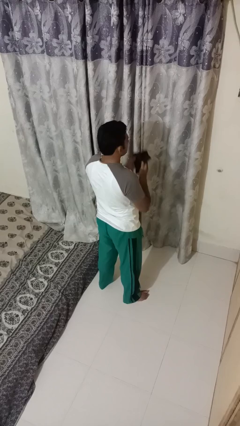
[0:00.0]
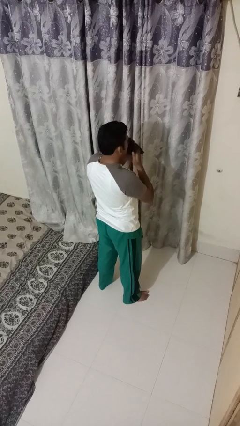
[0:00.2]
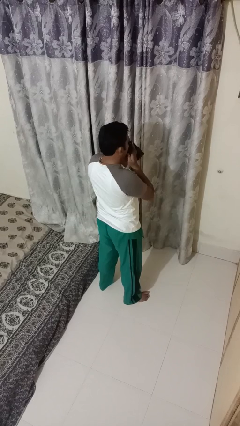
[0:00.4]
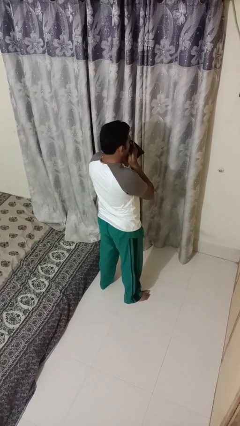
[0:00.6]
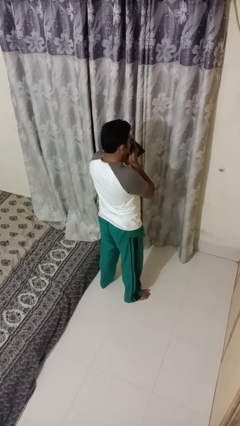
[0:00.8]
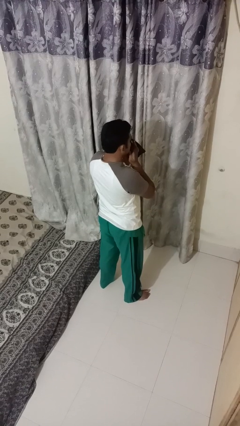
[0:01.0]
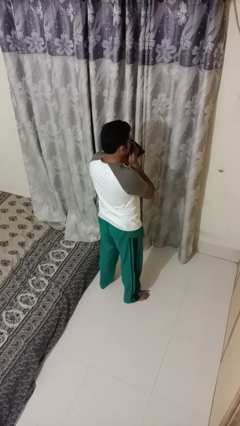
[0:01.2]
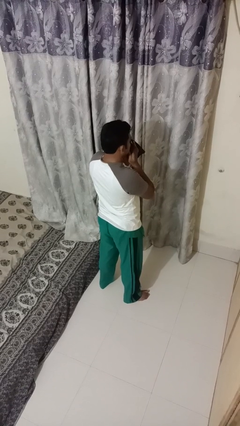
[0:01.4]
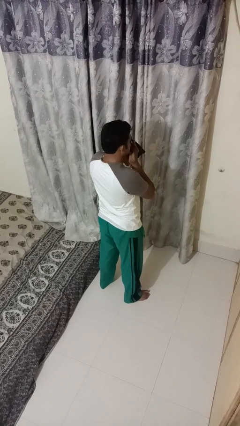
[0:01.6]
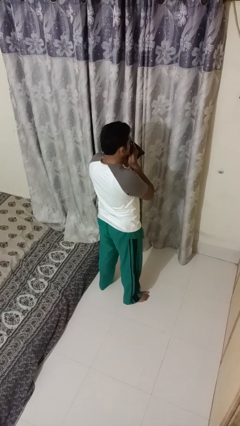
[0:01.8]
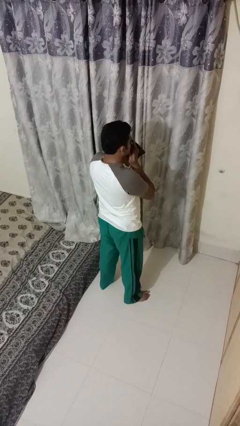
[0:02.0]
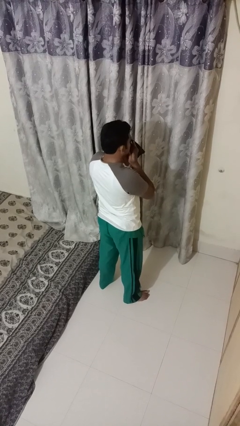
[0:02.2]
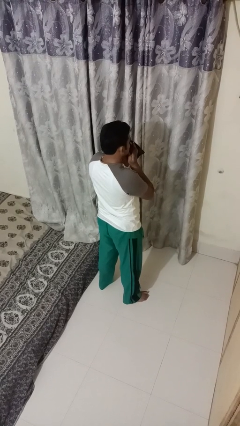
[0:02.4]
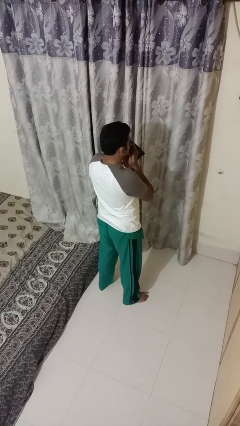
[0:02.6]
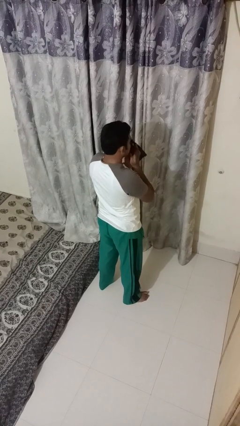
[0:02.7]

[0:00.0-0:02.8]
person blows nose

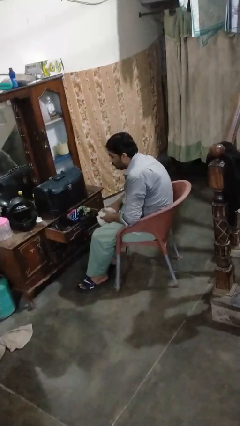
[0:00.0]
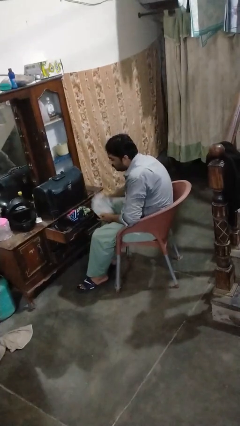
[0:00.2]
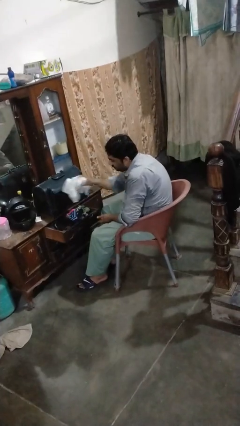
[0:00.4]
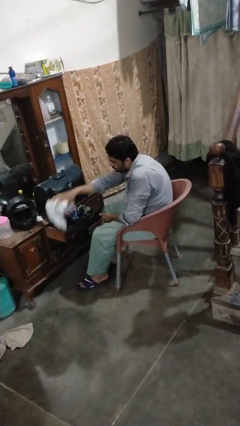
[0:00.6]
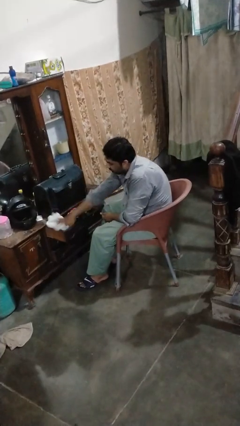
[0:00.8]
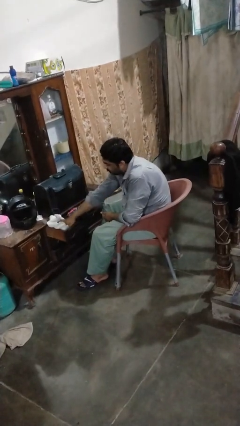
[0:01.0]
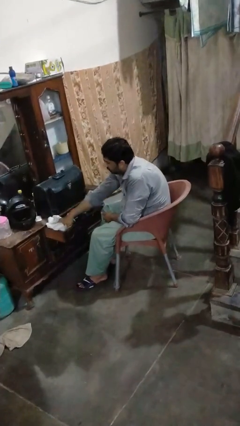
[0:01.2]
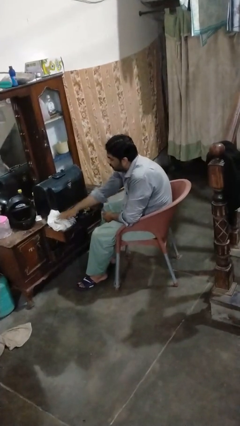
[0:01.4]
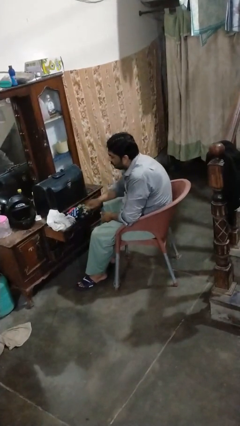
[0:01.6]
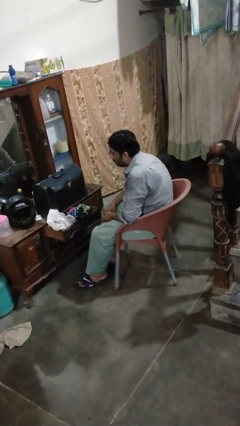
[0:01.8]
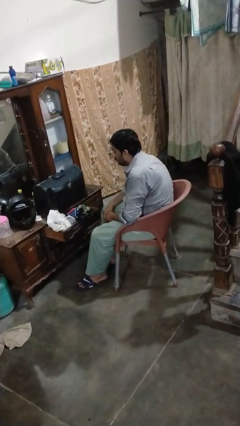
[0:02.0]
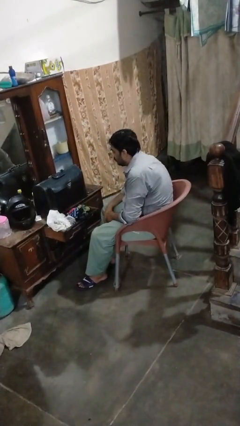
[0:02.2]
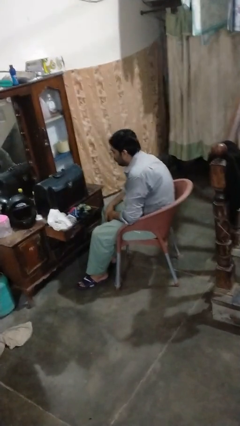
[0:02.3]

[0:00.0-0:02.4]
person puts clothes into dresser

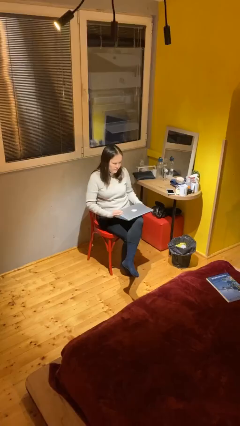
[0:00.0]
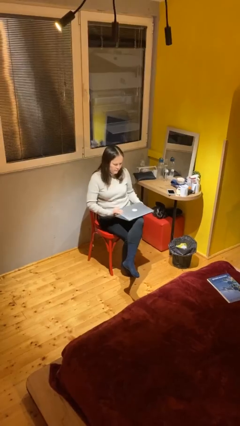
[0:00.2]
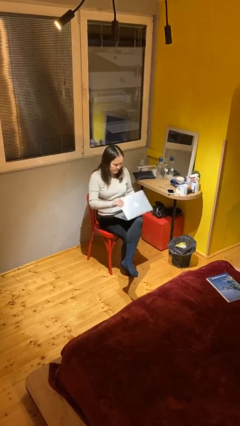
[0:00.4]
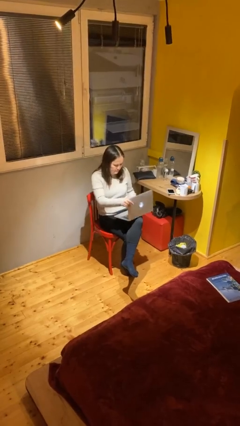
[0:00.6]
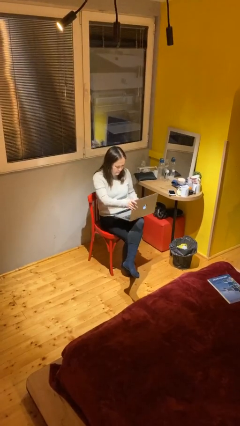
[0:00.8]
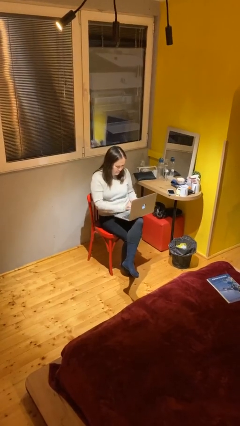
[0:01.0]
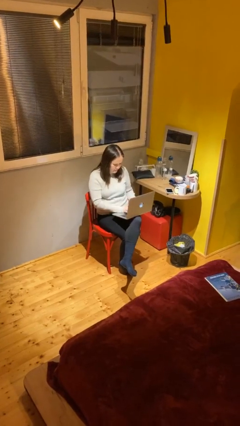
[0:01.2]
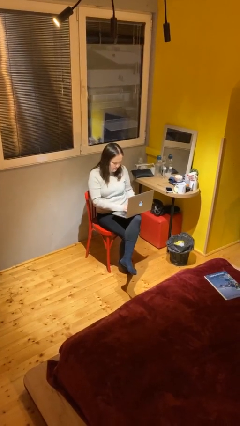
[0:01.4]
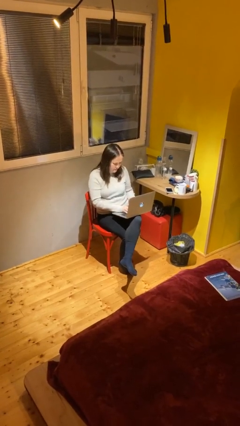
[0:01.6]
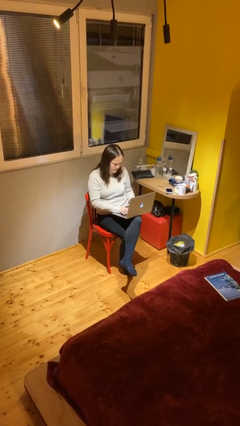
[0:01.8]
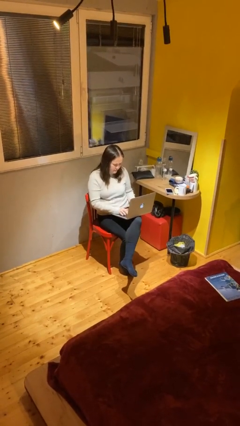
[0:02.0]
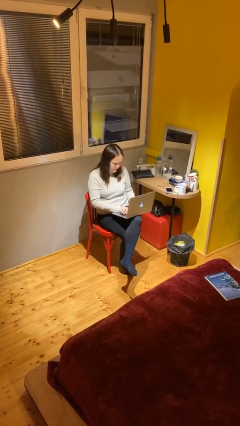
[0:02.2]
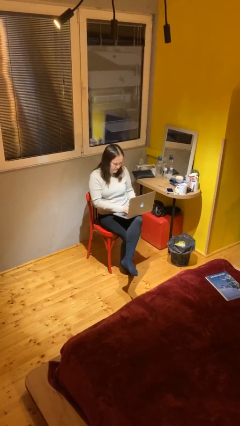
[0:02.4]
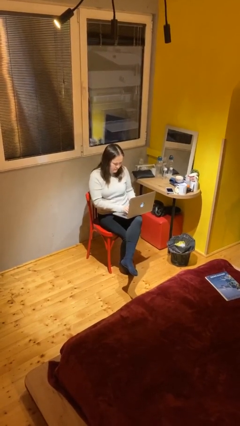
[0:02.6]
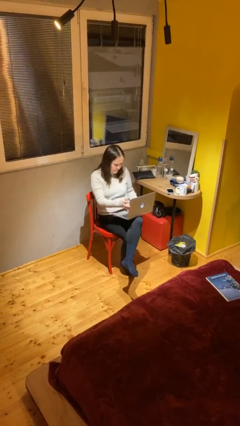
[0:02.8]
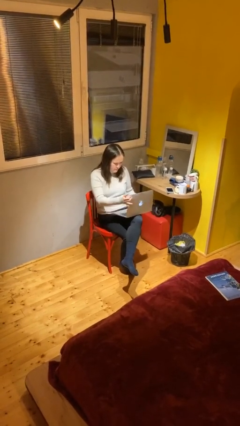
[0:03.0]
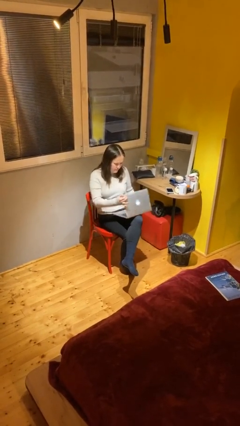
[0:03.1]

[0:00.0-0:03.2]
person interacts with laptop

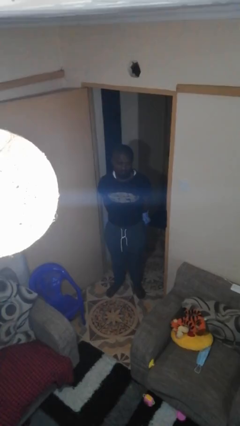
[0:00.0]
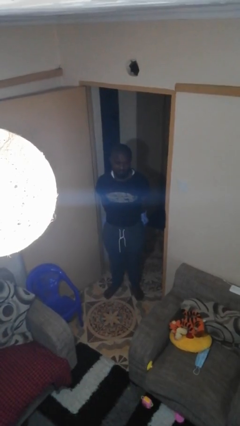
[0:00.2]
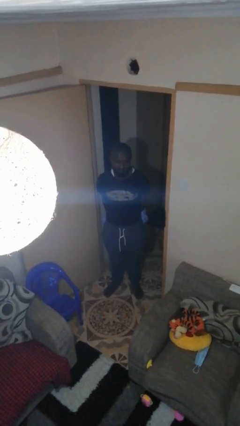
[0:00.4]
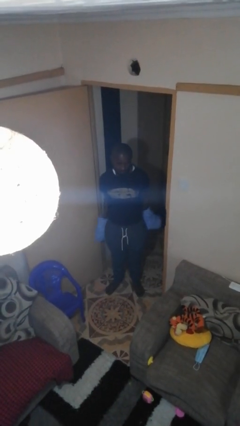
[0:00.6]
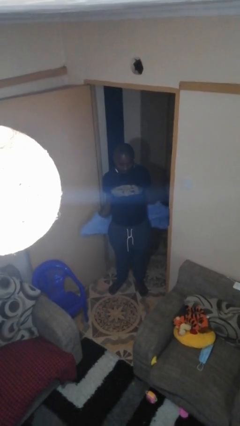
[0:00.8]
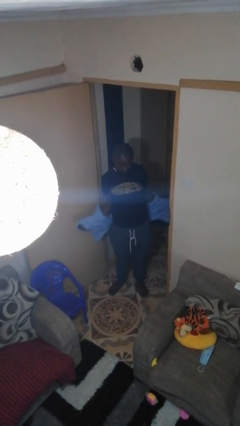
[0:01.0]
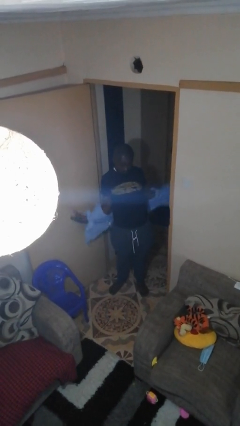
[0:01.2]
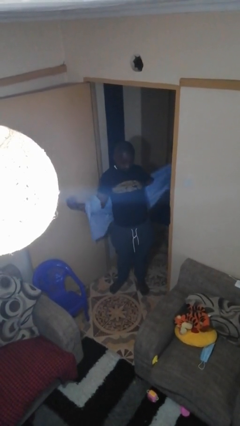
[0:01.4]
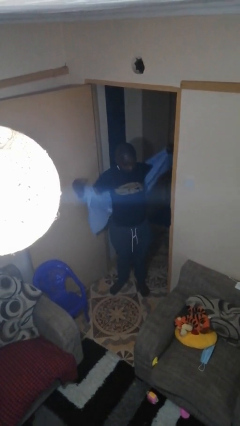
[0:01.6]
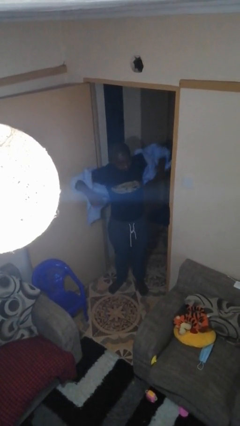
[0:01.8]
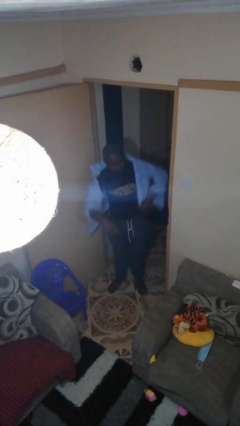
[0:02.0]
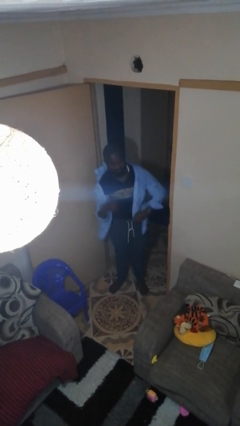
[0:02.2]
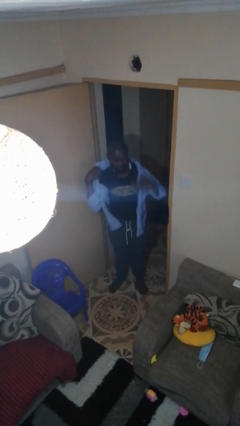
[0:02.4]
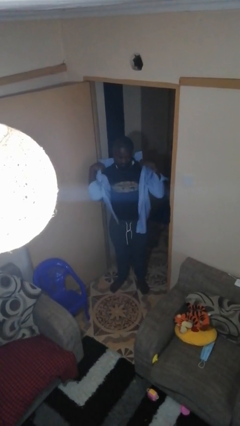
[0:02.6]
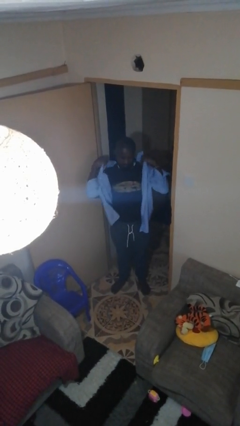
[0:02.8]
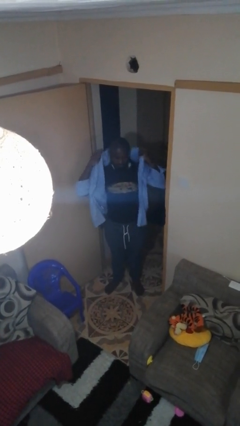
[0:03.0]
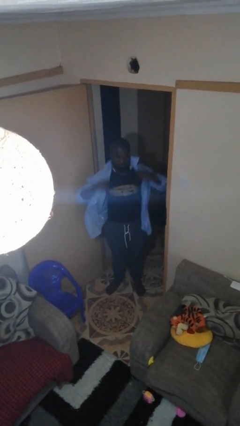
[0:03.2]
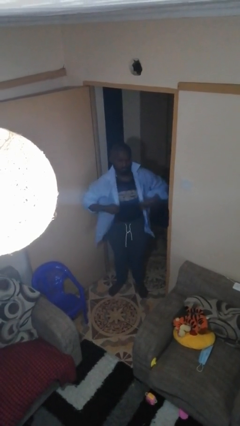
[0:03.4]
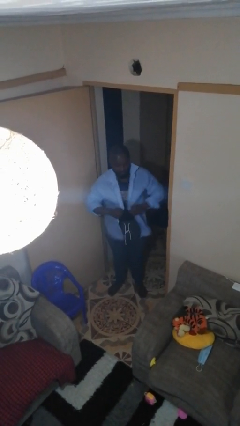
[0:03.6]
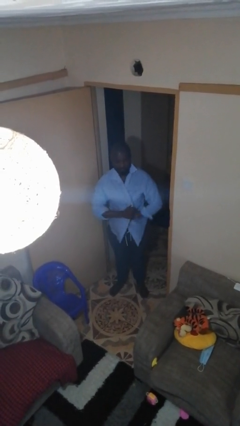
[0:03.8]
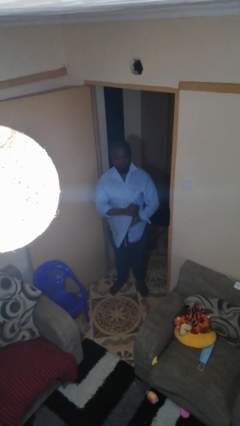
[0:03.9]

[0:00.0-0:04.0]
person puts on shirt

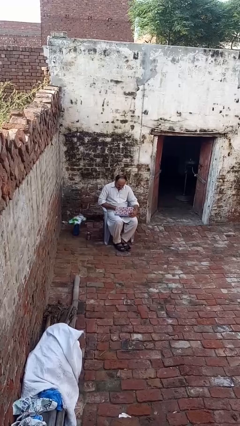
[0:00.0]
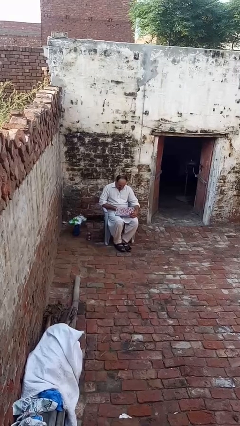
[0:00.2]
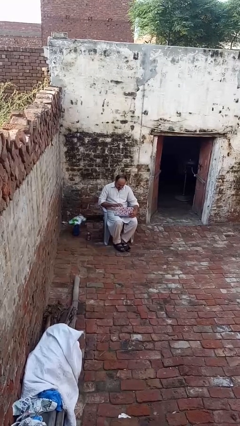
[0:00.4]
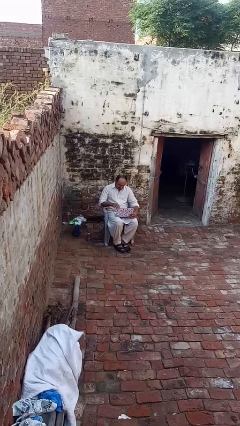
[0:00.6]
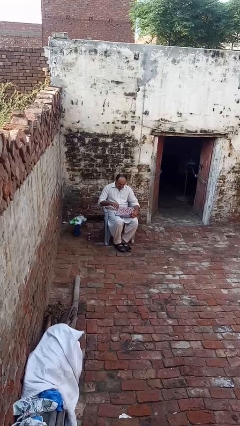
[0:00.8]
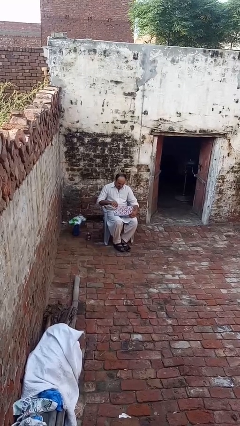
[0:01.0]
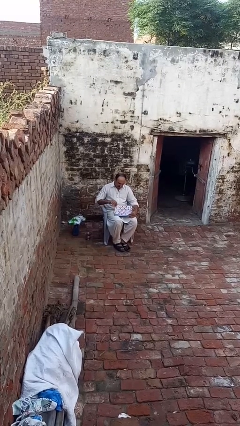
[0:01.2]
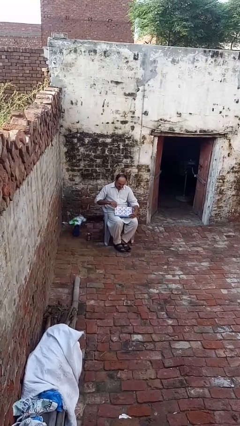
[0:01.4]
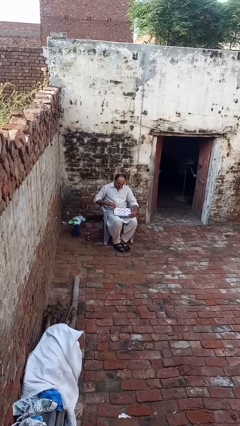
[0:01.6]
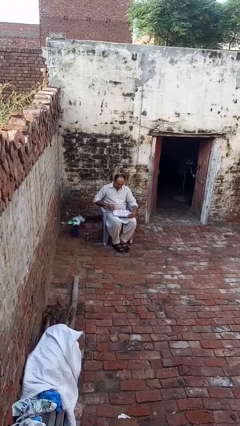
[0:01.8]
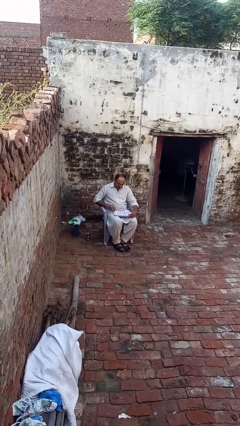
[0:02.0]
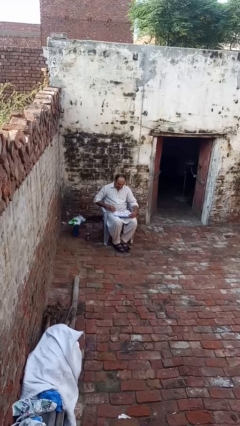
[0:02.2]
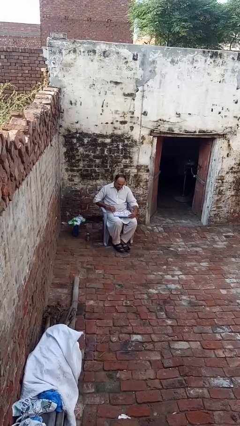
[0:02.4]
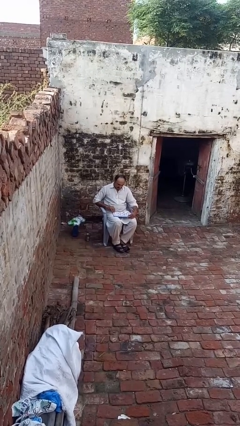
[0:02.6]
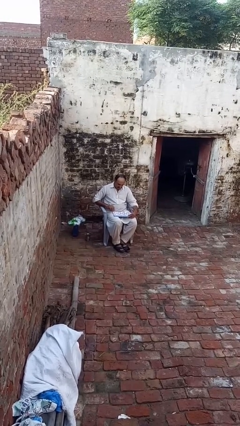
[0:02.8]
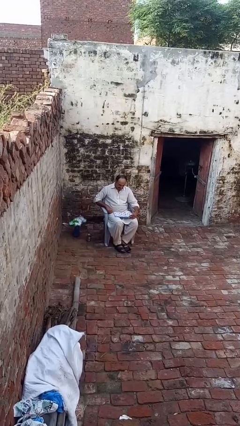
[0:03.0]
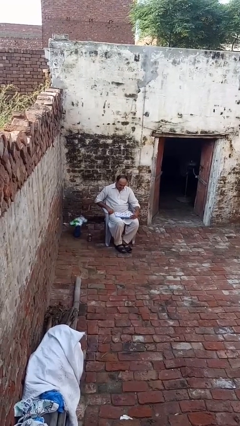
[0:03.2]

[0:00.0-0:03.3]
person closes laptop

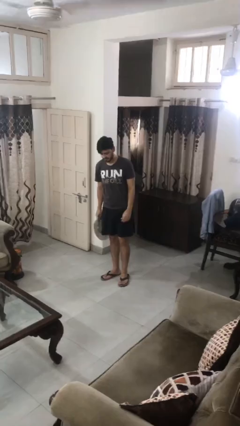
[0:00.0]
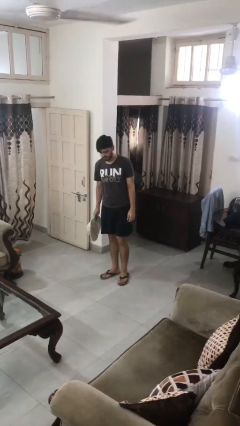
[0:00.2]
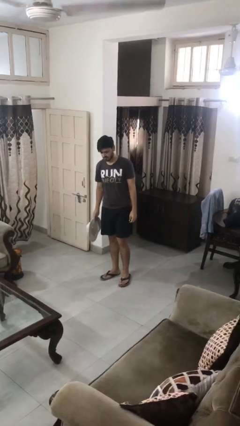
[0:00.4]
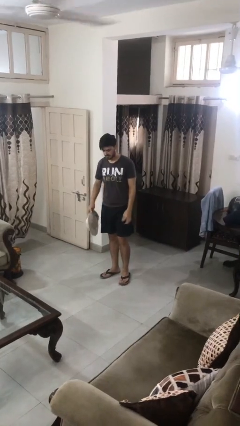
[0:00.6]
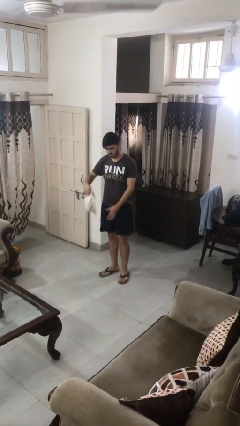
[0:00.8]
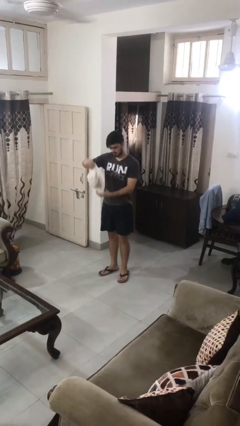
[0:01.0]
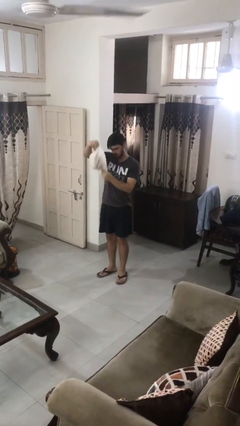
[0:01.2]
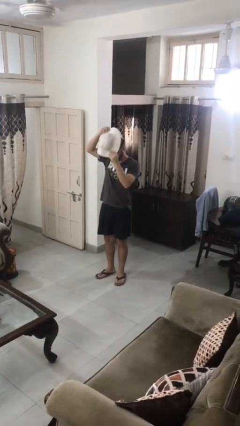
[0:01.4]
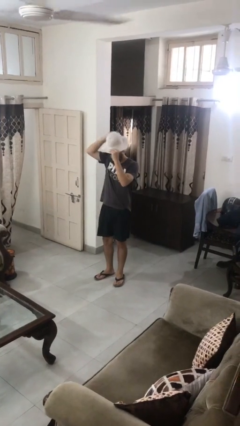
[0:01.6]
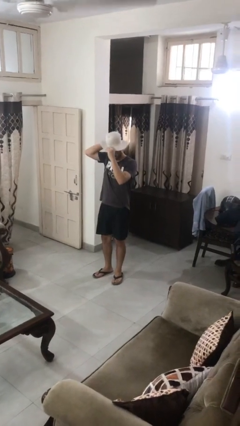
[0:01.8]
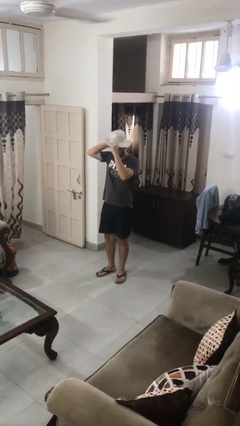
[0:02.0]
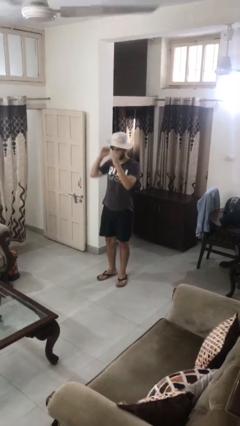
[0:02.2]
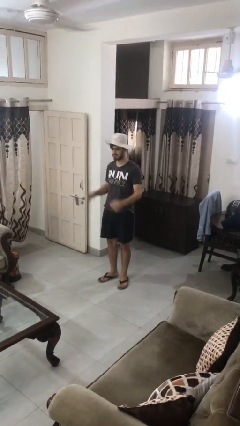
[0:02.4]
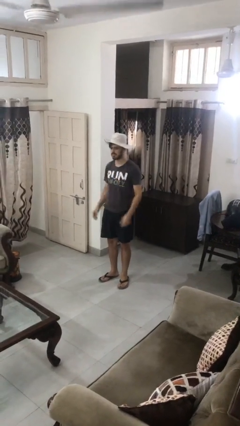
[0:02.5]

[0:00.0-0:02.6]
person puts on hat
